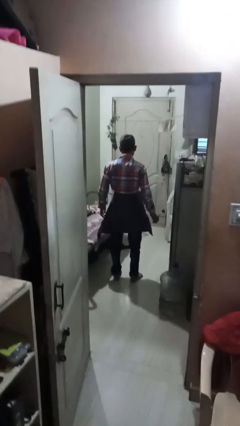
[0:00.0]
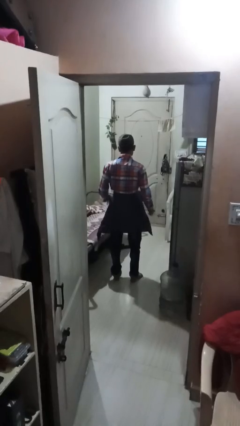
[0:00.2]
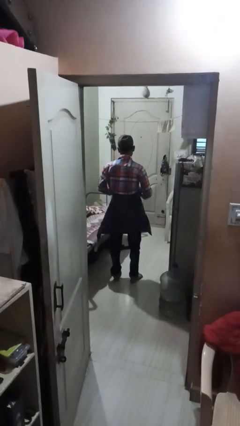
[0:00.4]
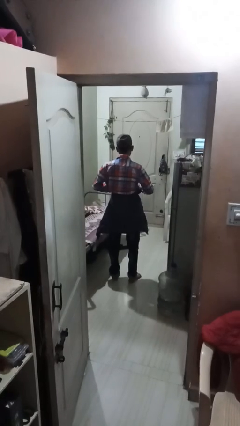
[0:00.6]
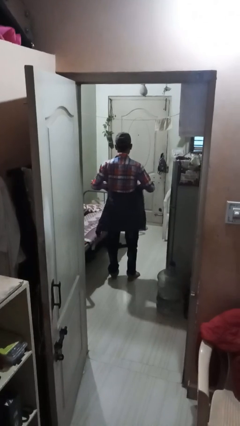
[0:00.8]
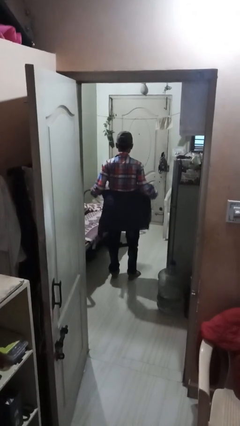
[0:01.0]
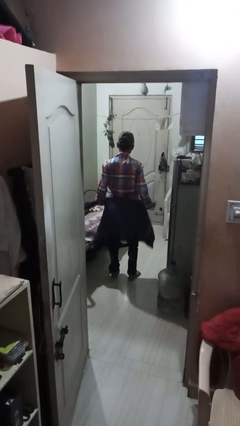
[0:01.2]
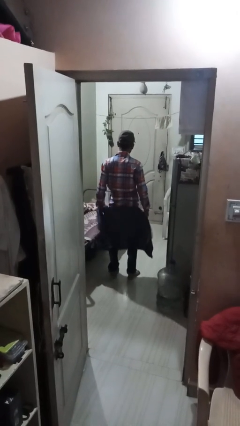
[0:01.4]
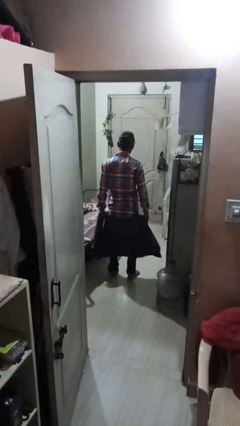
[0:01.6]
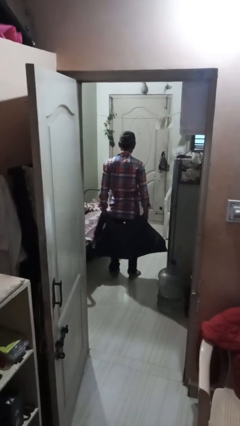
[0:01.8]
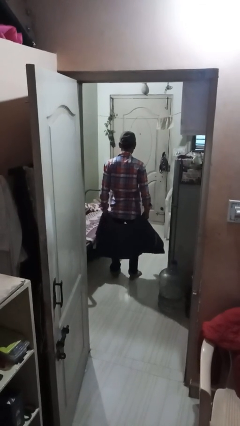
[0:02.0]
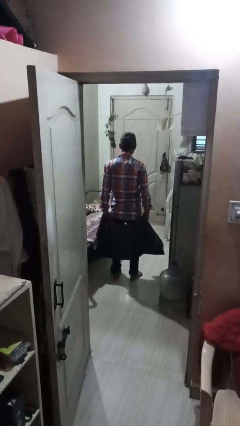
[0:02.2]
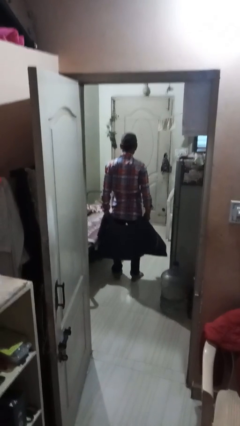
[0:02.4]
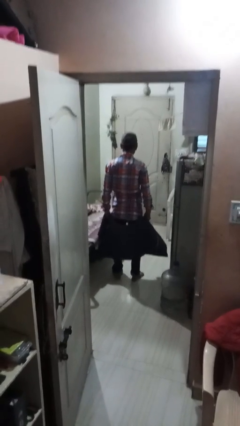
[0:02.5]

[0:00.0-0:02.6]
person unties jacket around waist

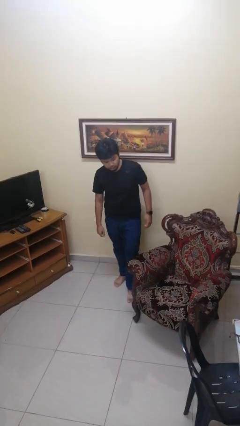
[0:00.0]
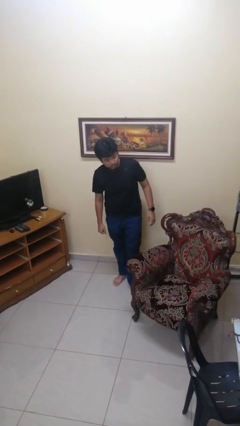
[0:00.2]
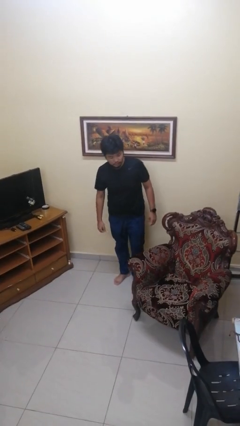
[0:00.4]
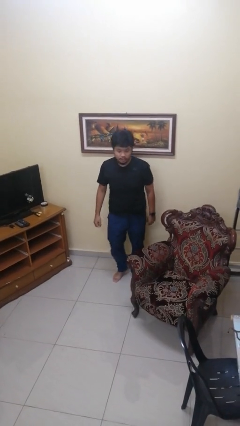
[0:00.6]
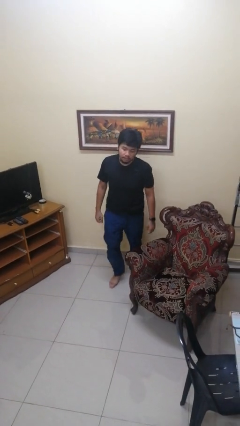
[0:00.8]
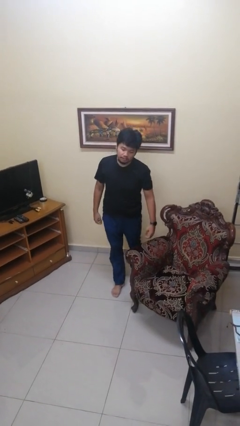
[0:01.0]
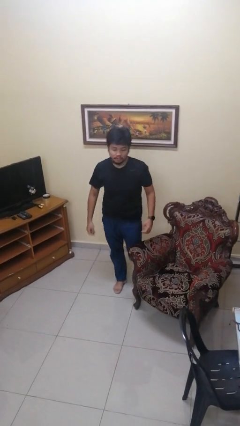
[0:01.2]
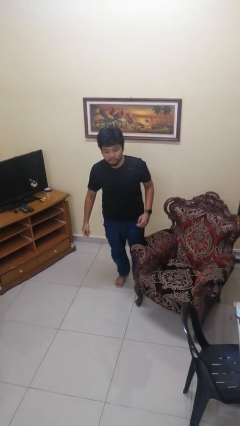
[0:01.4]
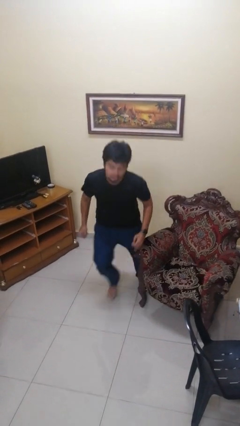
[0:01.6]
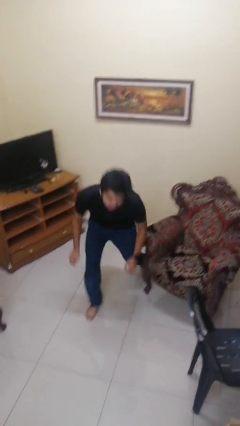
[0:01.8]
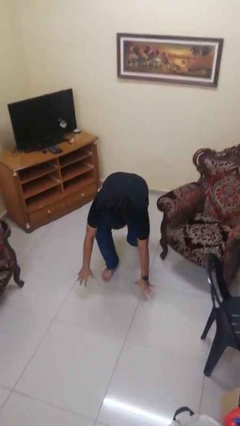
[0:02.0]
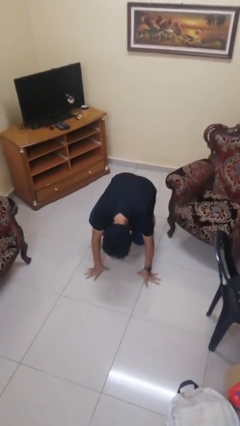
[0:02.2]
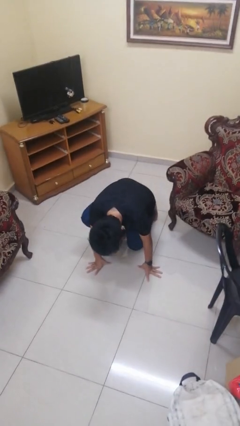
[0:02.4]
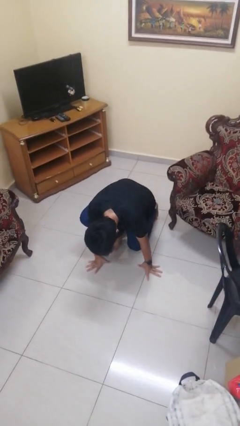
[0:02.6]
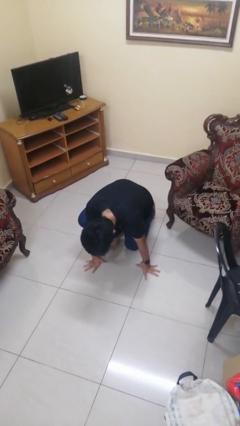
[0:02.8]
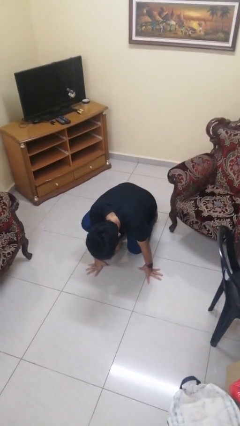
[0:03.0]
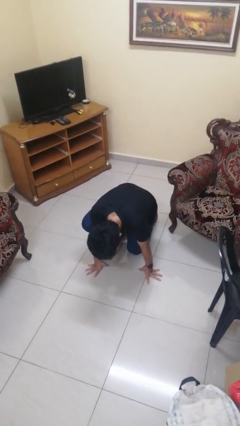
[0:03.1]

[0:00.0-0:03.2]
person trips on object on floor

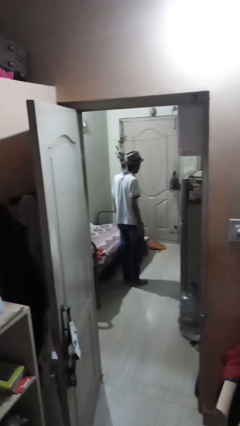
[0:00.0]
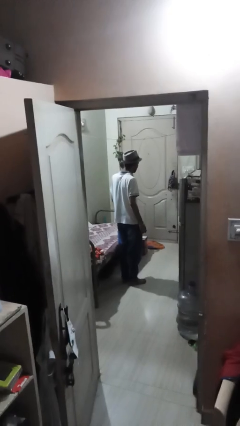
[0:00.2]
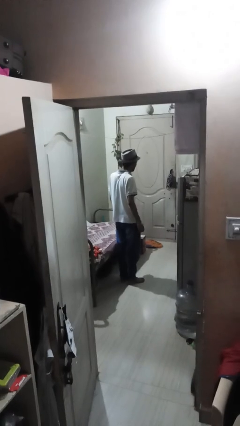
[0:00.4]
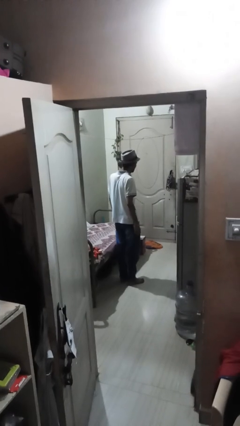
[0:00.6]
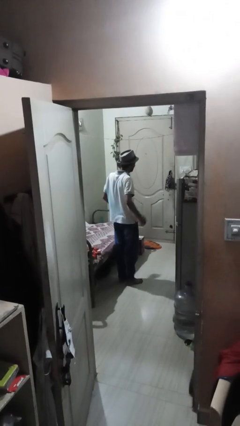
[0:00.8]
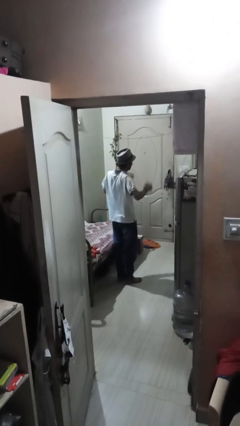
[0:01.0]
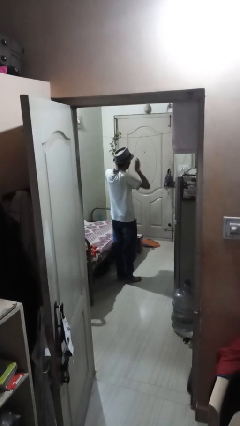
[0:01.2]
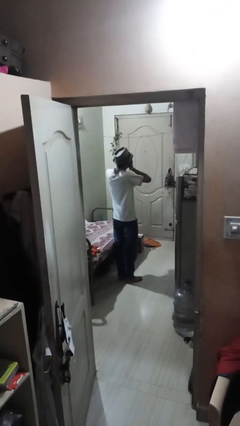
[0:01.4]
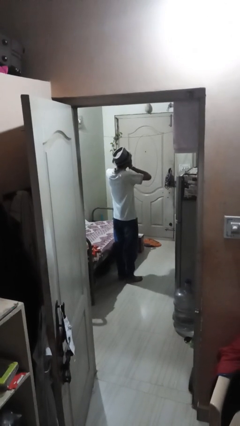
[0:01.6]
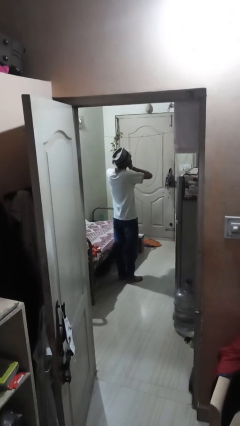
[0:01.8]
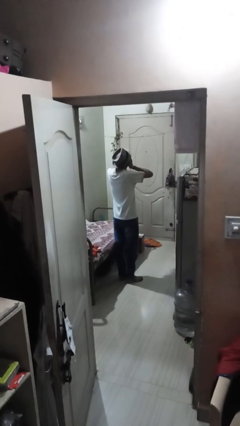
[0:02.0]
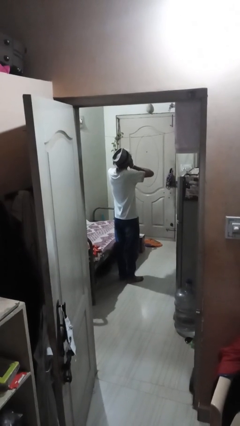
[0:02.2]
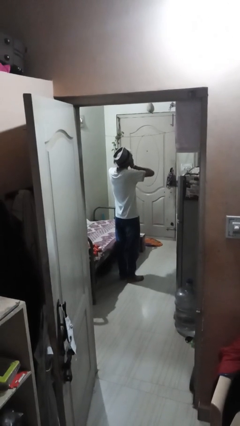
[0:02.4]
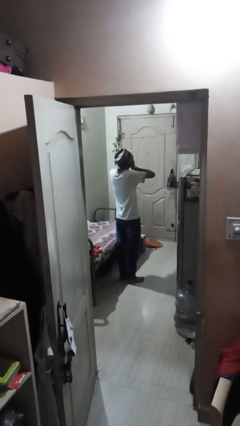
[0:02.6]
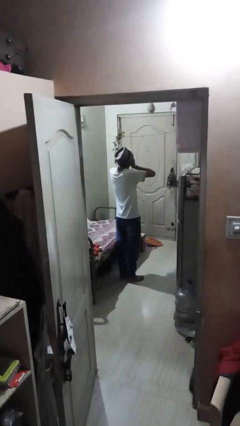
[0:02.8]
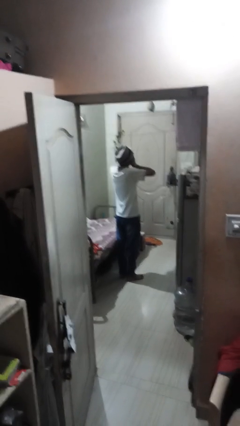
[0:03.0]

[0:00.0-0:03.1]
person covers face with hands

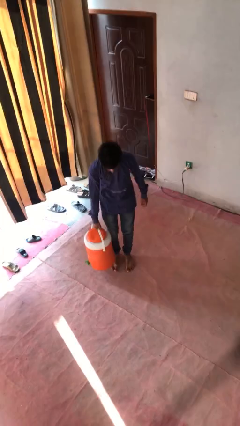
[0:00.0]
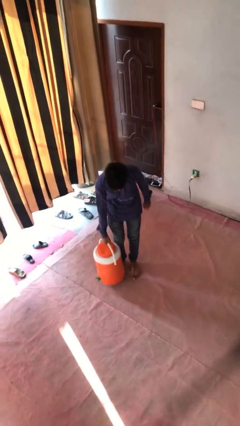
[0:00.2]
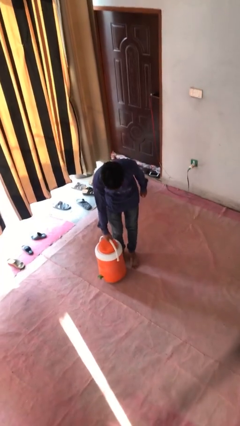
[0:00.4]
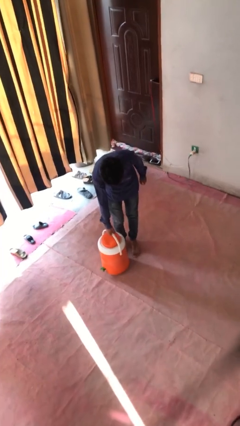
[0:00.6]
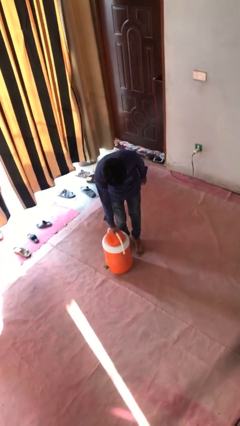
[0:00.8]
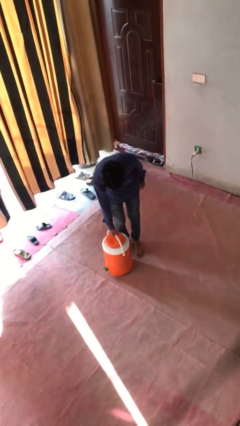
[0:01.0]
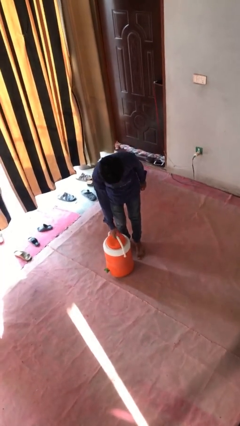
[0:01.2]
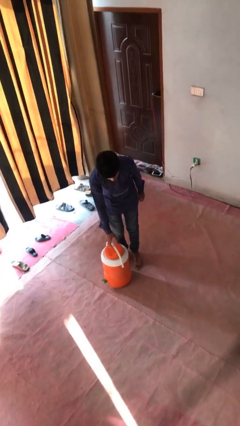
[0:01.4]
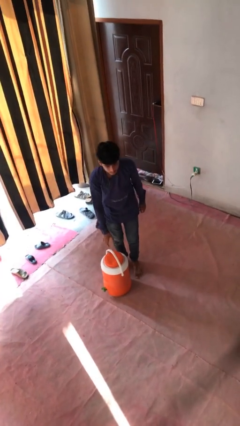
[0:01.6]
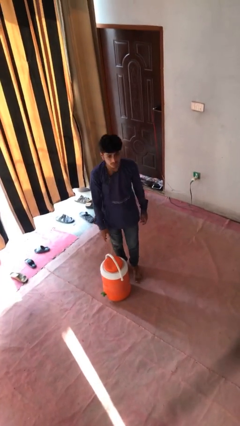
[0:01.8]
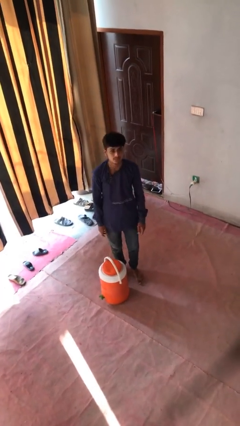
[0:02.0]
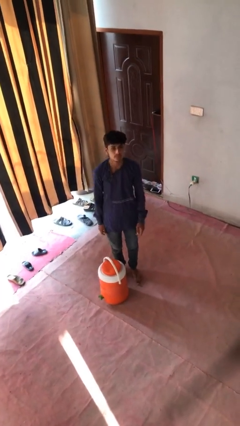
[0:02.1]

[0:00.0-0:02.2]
person puts down object on floor

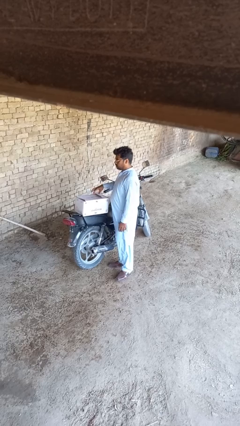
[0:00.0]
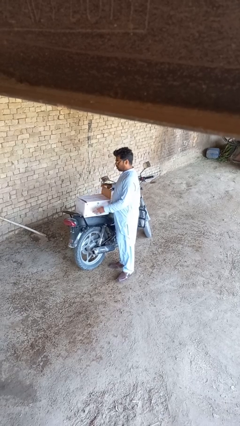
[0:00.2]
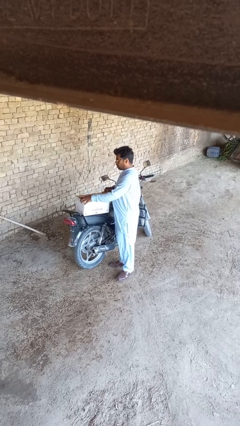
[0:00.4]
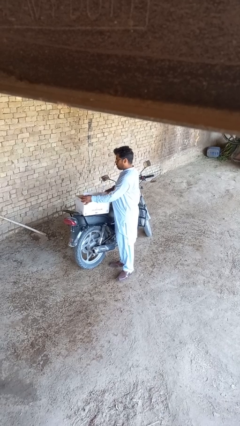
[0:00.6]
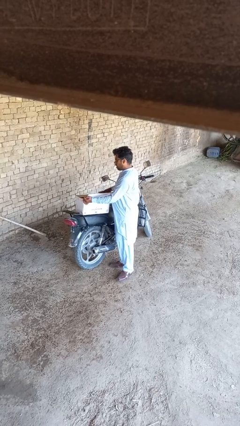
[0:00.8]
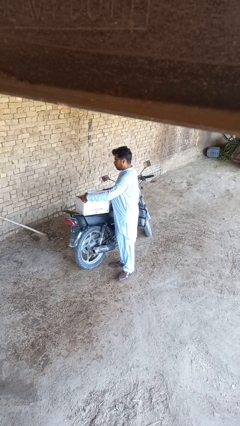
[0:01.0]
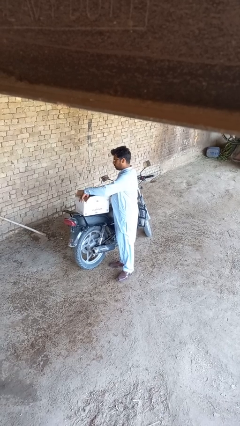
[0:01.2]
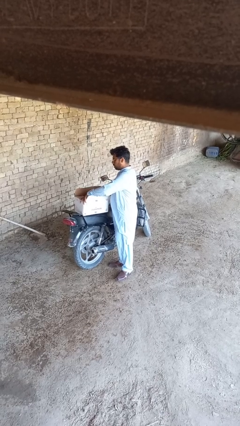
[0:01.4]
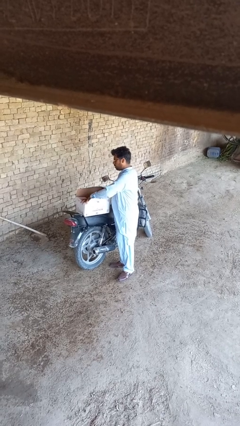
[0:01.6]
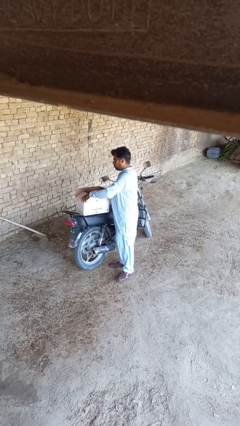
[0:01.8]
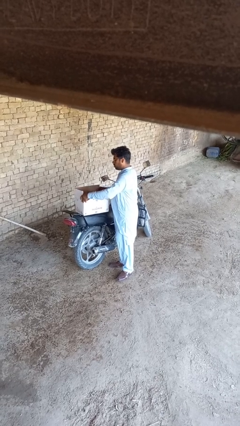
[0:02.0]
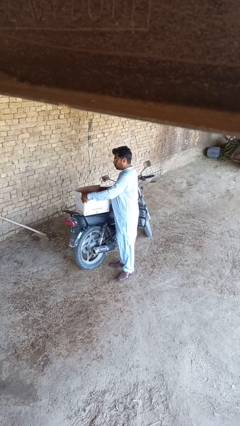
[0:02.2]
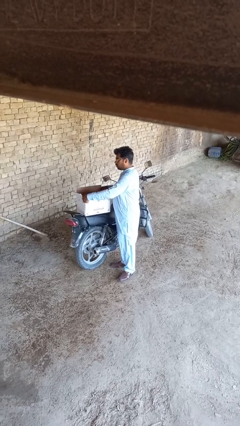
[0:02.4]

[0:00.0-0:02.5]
person opens box

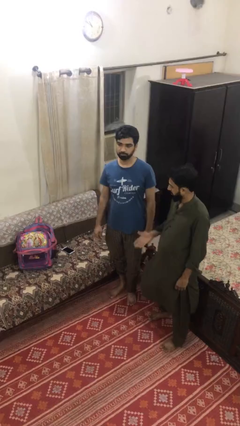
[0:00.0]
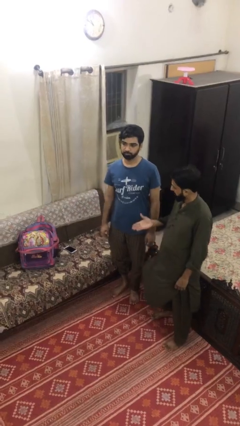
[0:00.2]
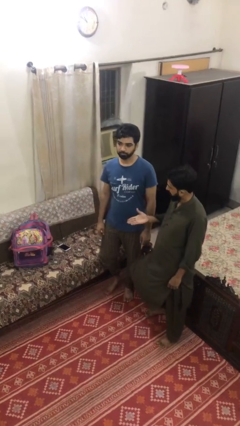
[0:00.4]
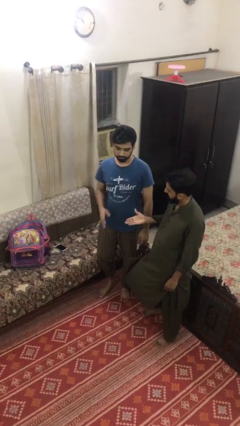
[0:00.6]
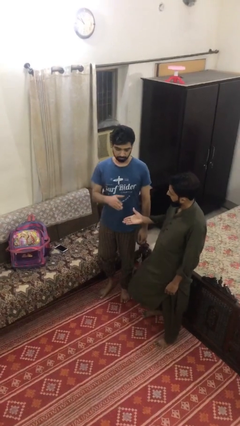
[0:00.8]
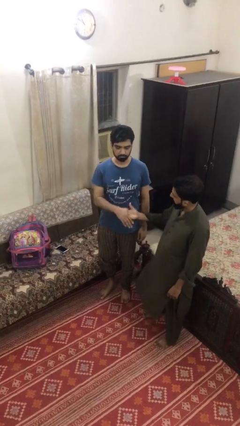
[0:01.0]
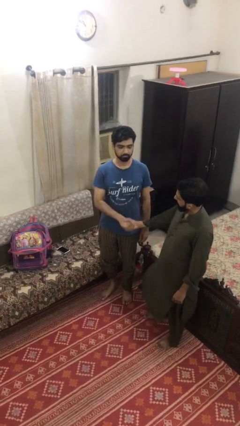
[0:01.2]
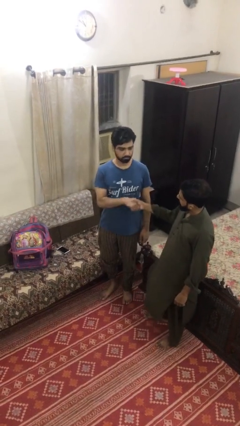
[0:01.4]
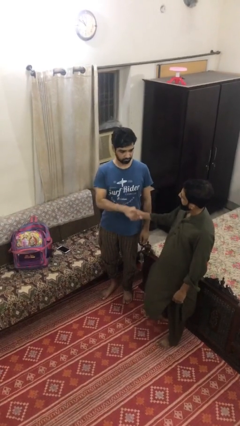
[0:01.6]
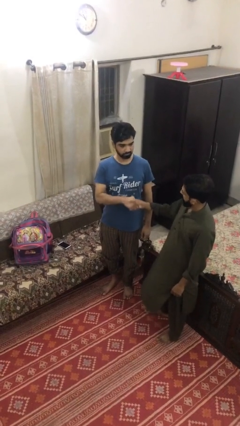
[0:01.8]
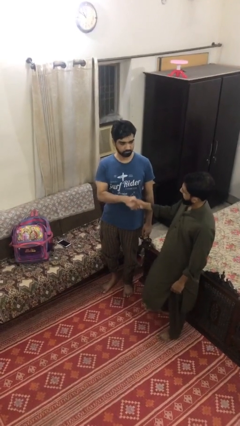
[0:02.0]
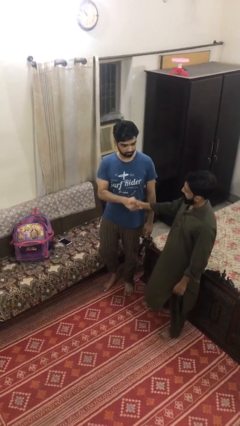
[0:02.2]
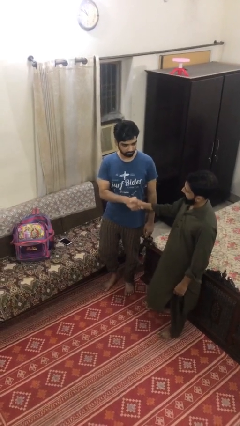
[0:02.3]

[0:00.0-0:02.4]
person shakes hand

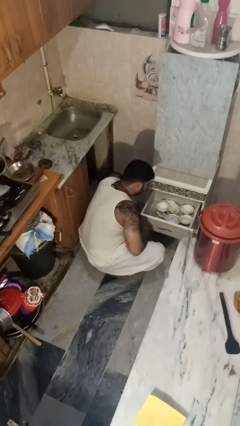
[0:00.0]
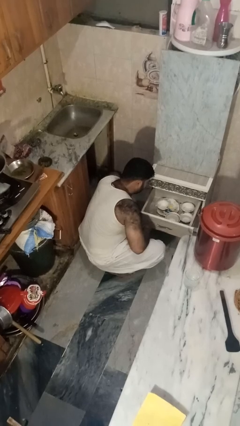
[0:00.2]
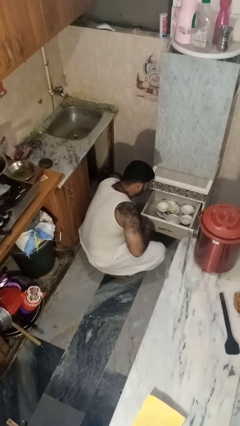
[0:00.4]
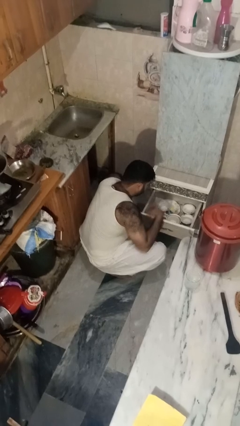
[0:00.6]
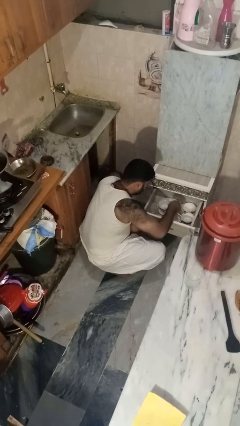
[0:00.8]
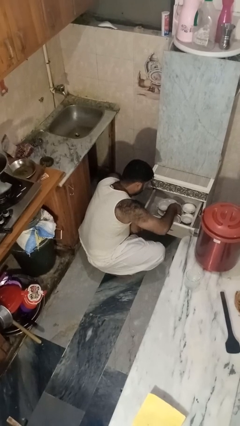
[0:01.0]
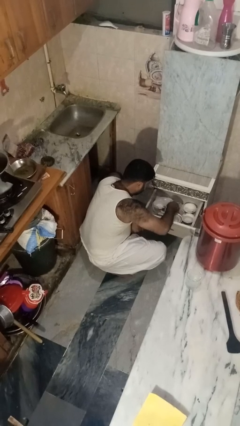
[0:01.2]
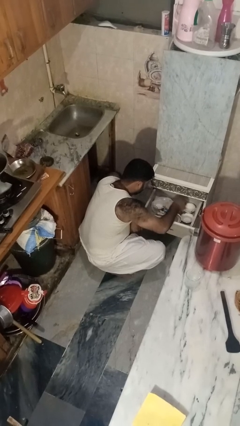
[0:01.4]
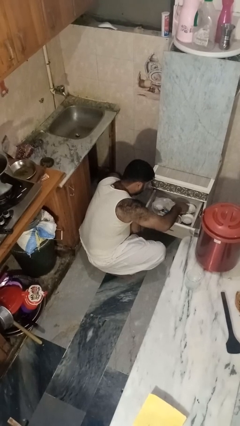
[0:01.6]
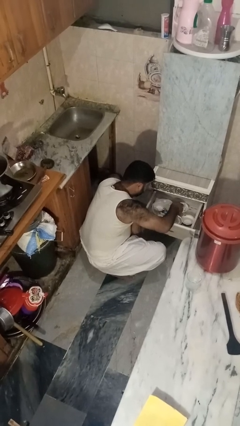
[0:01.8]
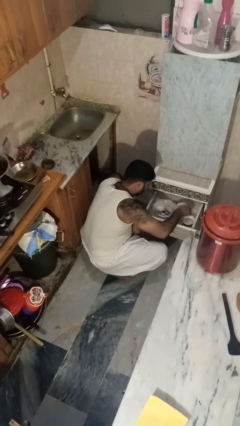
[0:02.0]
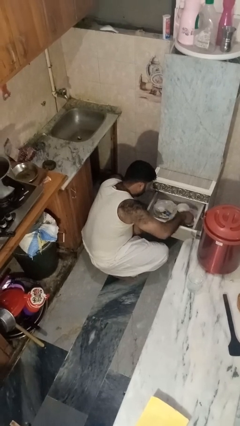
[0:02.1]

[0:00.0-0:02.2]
person searches in kitchen drawer
